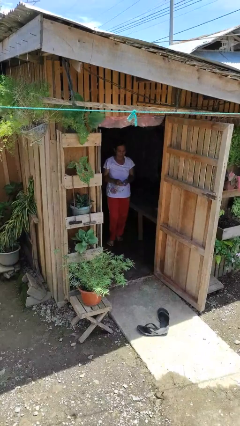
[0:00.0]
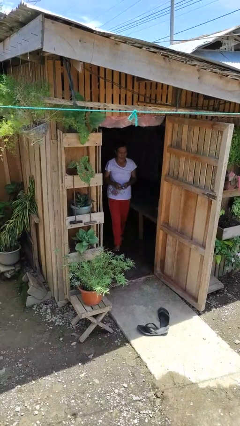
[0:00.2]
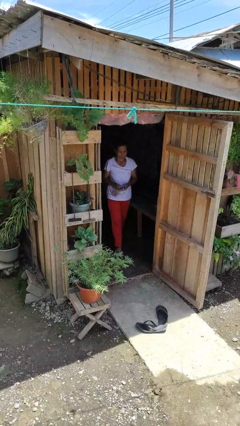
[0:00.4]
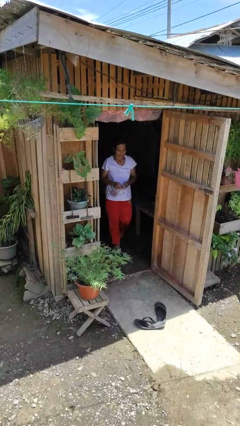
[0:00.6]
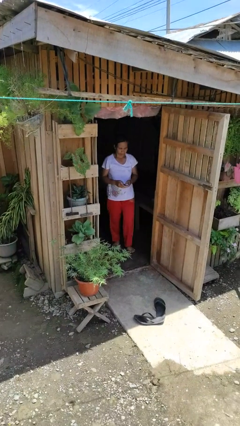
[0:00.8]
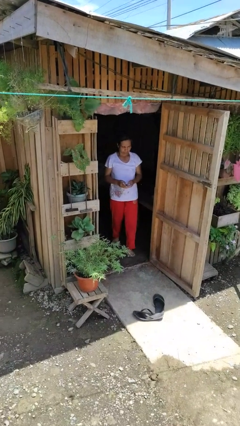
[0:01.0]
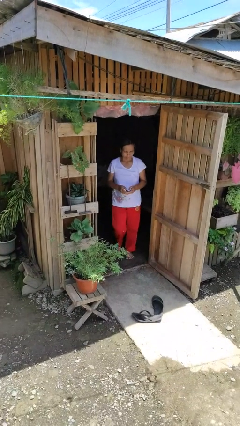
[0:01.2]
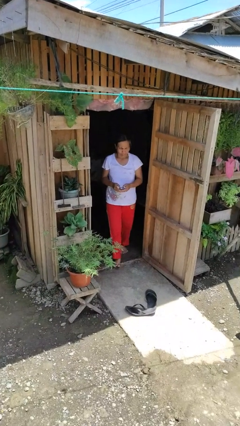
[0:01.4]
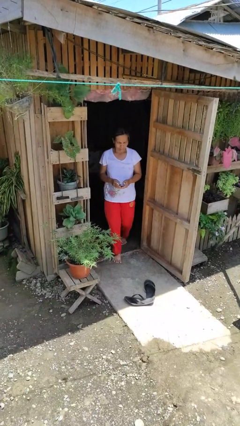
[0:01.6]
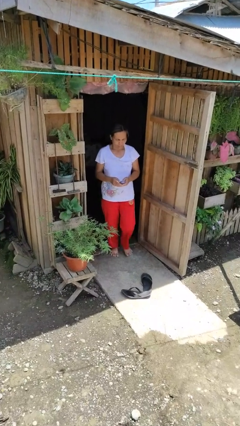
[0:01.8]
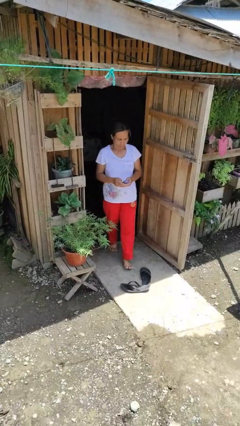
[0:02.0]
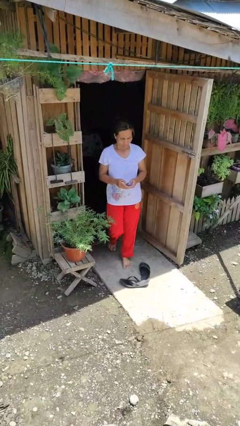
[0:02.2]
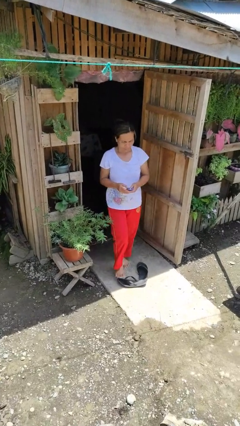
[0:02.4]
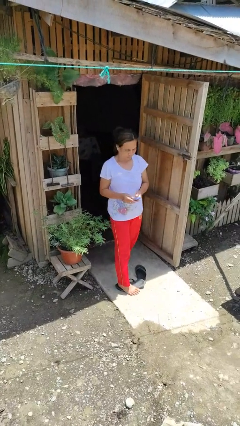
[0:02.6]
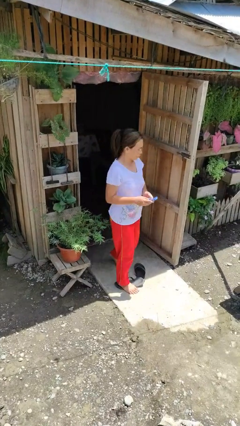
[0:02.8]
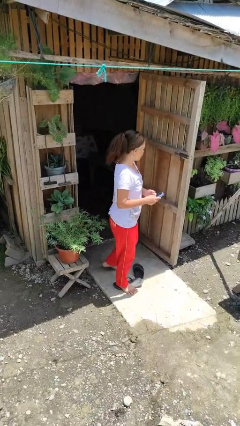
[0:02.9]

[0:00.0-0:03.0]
person enters scene through structure

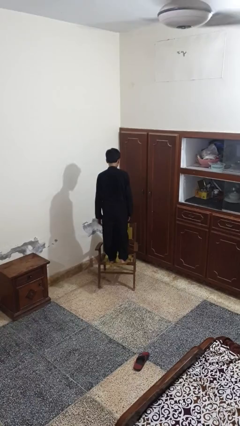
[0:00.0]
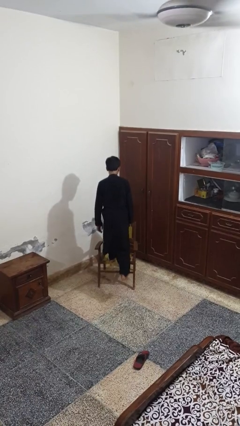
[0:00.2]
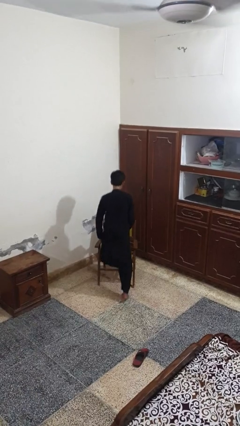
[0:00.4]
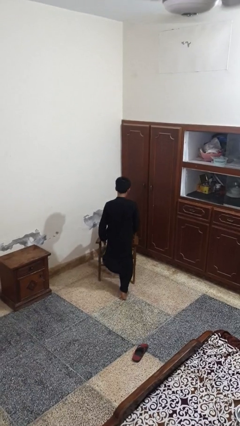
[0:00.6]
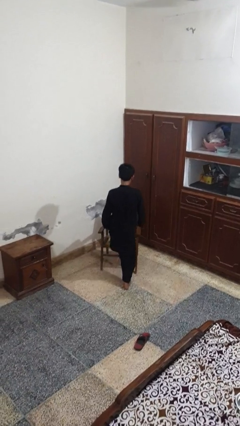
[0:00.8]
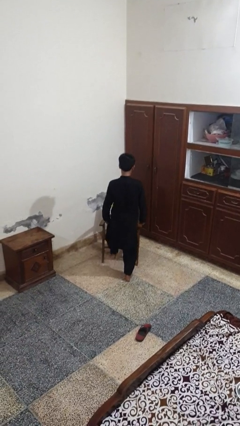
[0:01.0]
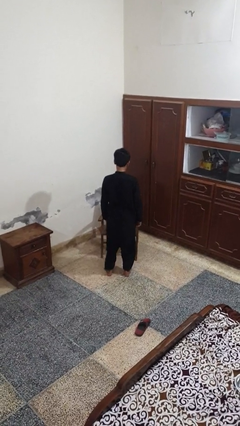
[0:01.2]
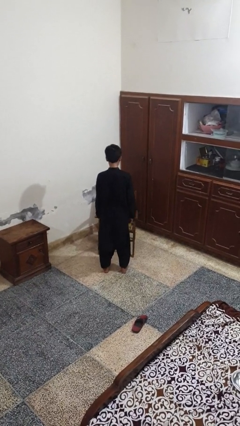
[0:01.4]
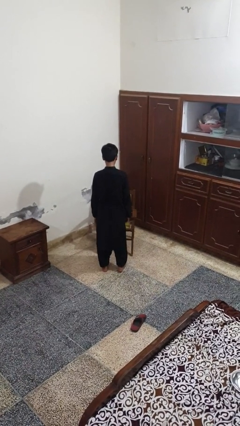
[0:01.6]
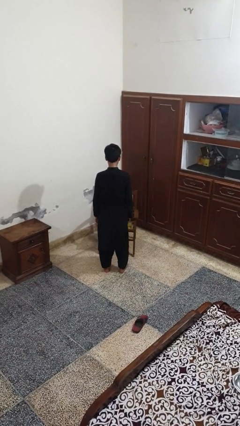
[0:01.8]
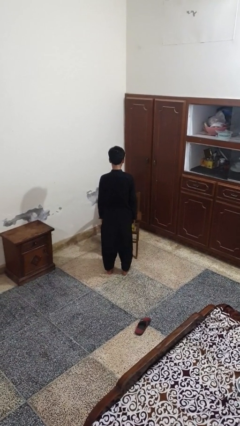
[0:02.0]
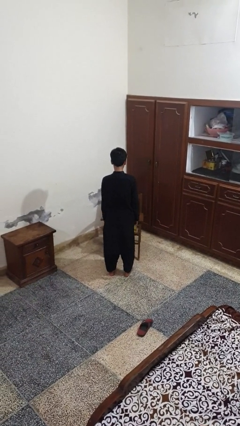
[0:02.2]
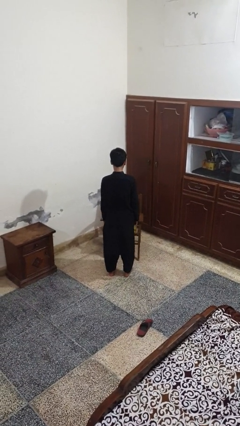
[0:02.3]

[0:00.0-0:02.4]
person climbs off chair

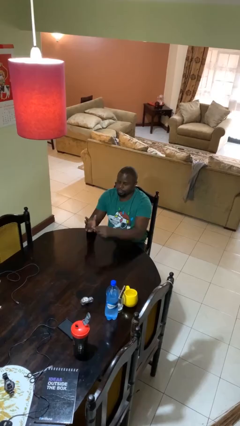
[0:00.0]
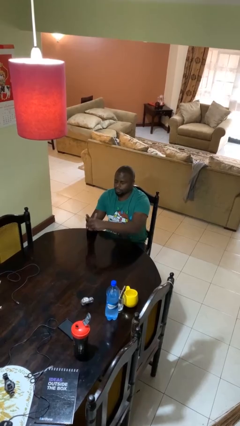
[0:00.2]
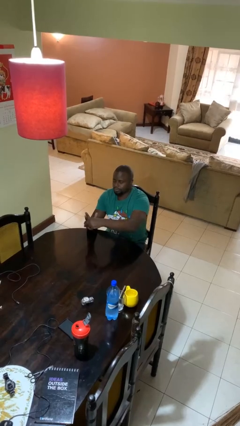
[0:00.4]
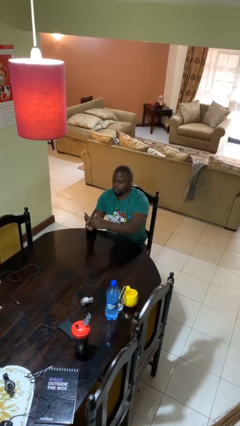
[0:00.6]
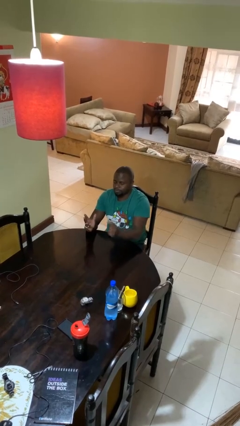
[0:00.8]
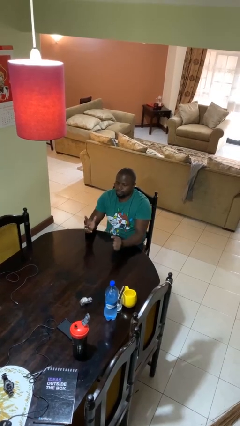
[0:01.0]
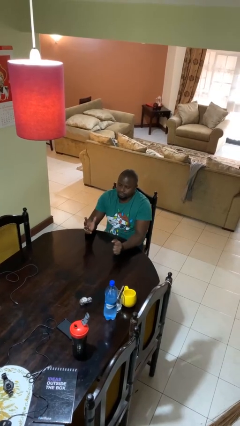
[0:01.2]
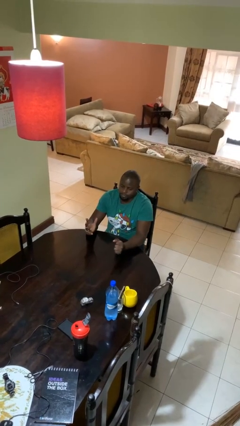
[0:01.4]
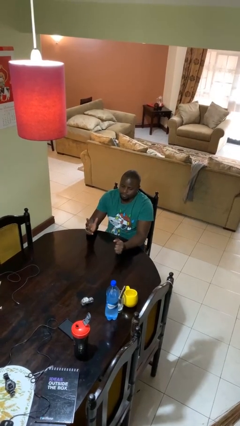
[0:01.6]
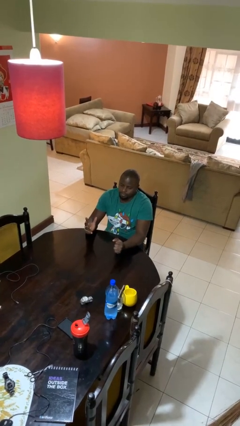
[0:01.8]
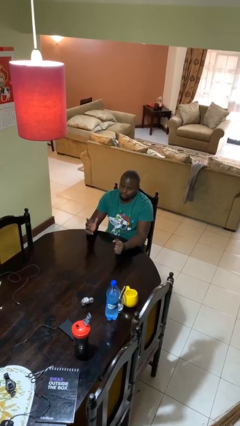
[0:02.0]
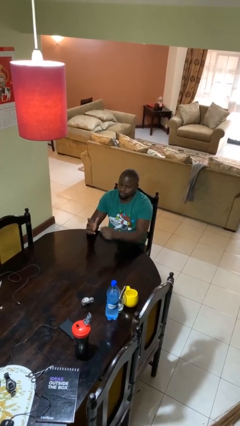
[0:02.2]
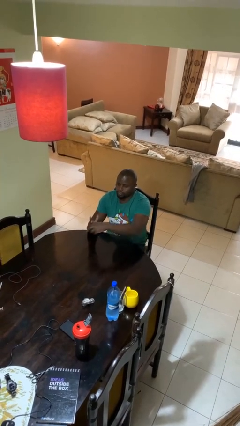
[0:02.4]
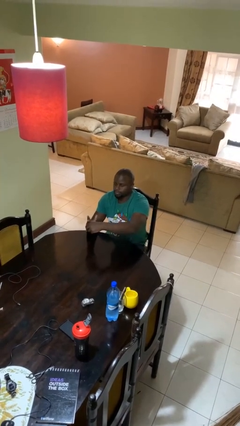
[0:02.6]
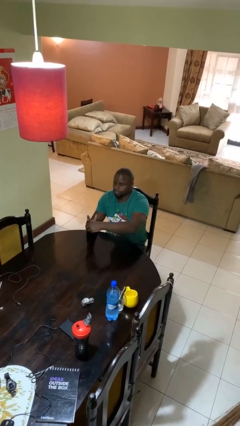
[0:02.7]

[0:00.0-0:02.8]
person puts on ring

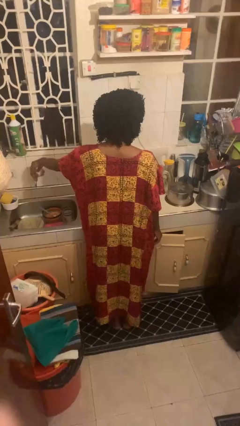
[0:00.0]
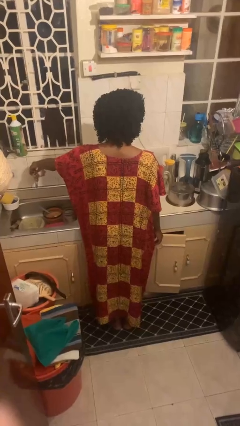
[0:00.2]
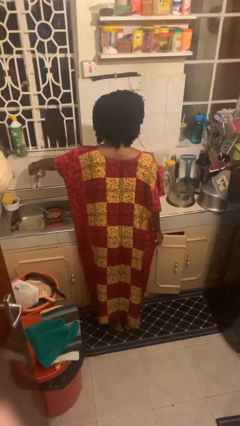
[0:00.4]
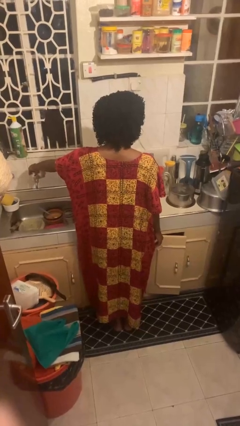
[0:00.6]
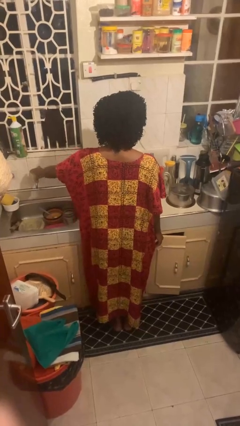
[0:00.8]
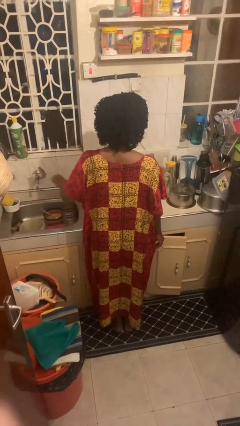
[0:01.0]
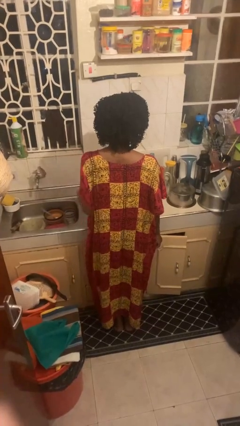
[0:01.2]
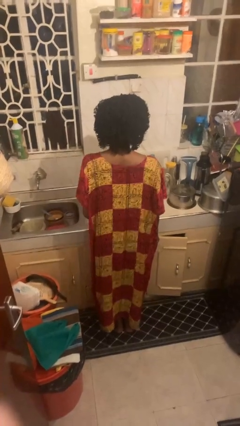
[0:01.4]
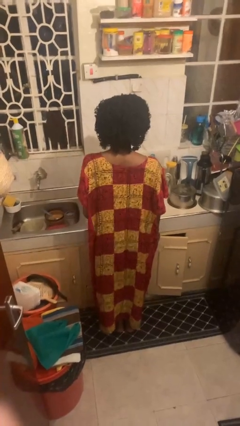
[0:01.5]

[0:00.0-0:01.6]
person turns off faucet

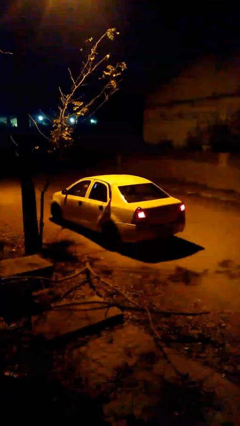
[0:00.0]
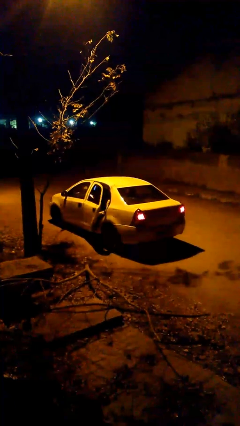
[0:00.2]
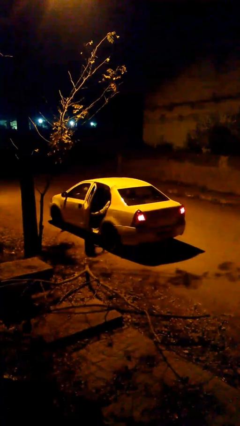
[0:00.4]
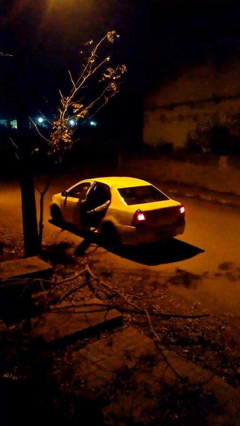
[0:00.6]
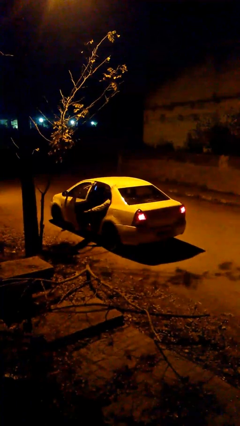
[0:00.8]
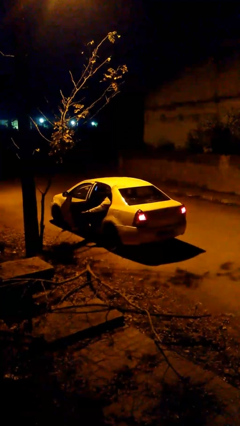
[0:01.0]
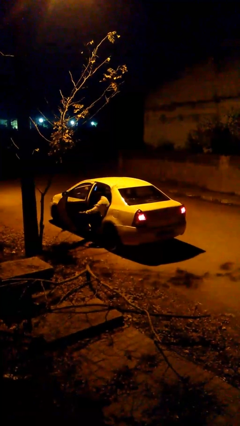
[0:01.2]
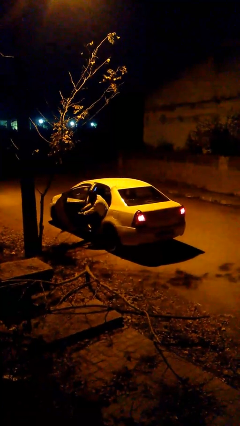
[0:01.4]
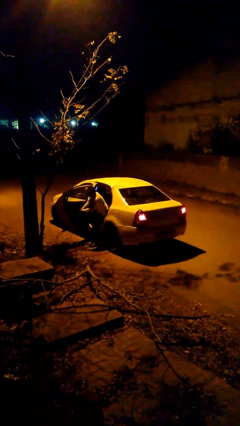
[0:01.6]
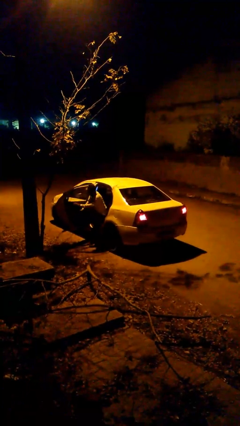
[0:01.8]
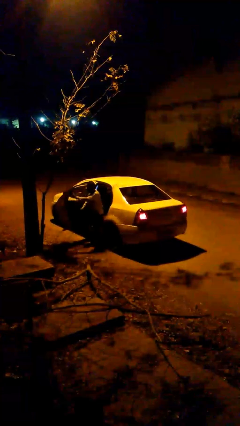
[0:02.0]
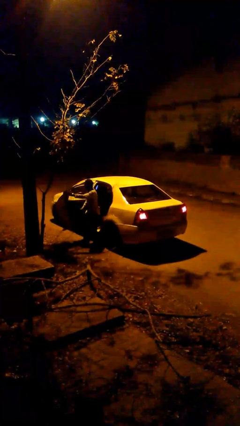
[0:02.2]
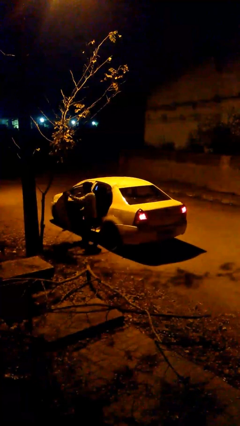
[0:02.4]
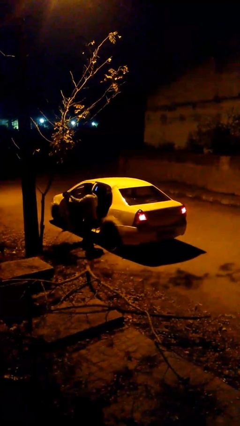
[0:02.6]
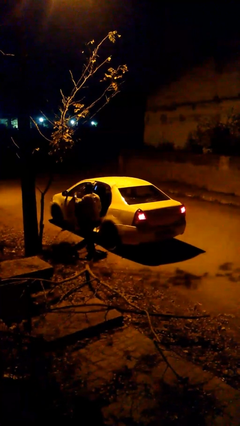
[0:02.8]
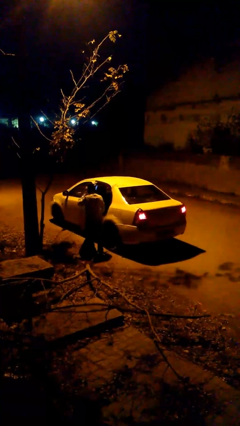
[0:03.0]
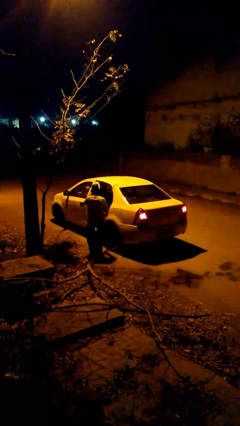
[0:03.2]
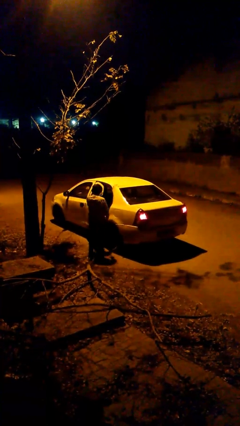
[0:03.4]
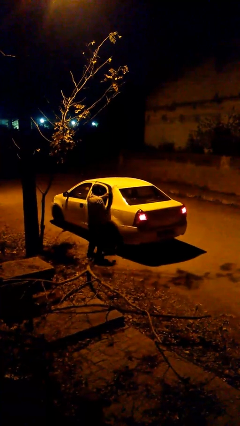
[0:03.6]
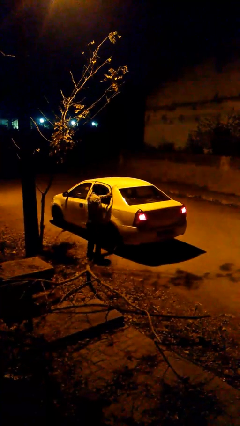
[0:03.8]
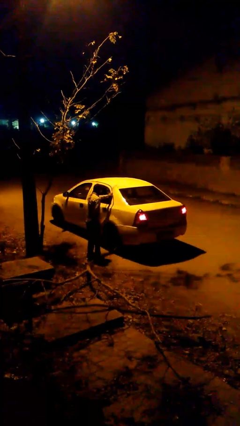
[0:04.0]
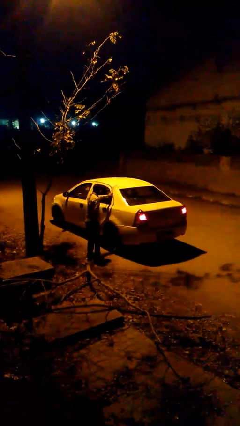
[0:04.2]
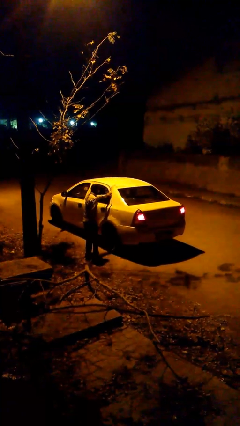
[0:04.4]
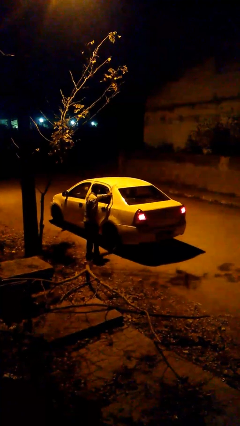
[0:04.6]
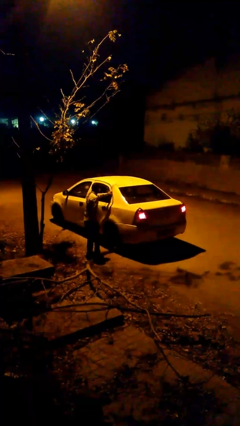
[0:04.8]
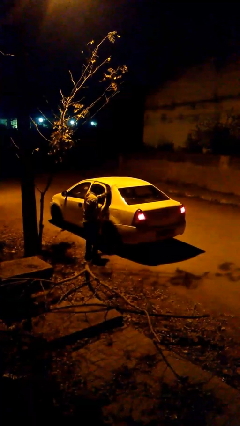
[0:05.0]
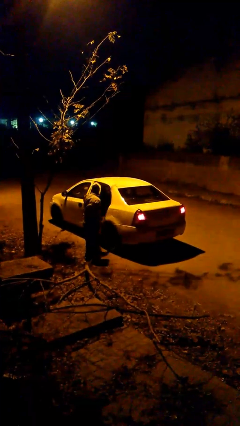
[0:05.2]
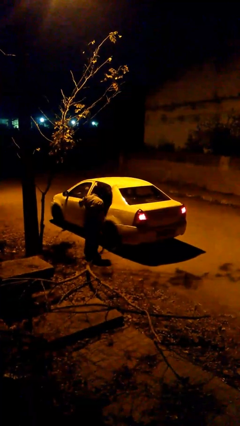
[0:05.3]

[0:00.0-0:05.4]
car drops off person

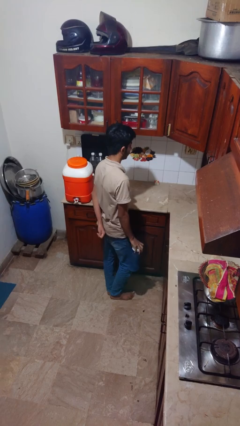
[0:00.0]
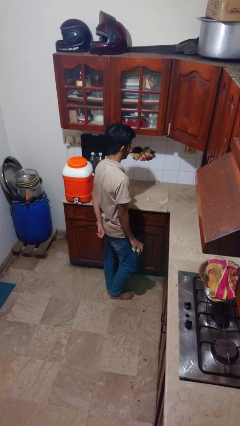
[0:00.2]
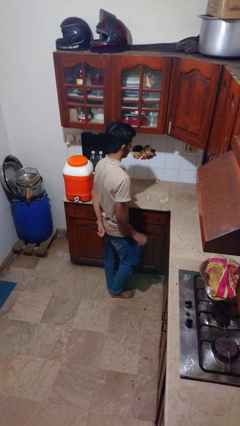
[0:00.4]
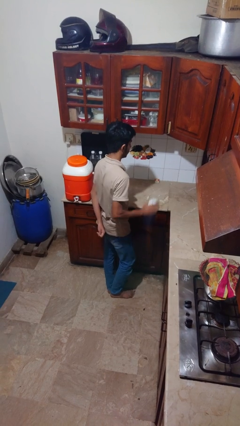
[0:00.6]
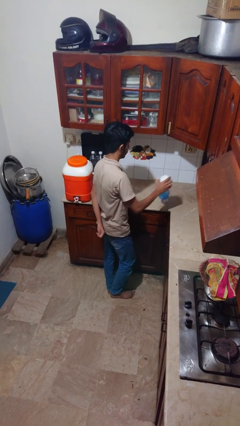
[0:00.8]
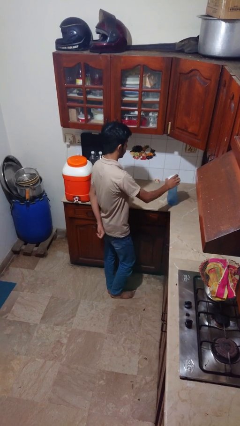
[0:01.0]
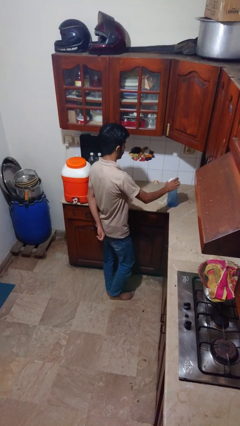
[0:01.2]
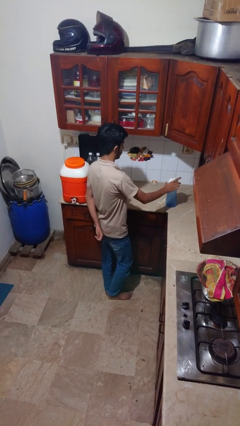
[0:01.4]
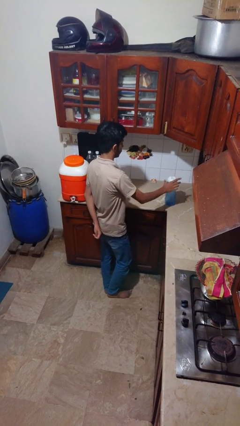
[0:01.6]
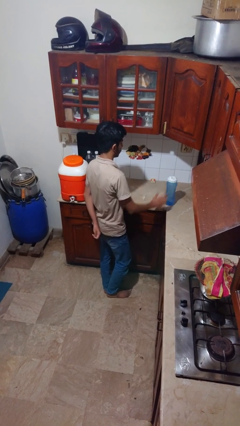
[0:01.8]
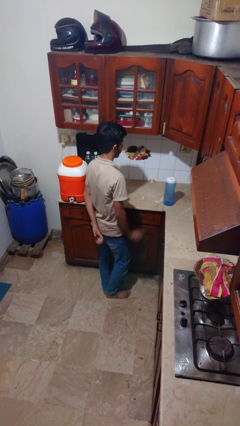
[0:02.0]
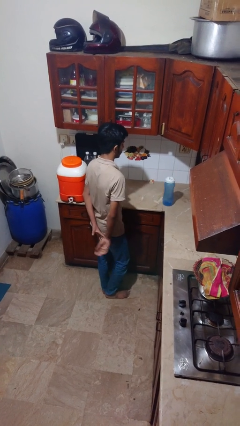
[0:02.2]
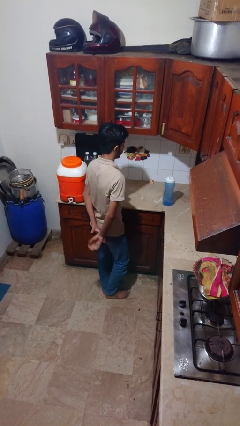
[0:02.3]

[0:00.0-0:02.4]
person puts down object on countertop

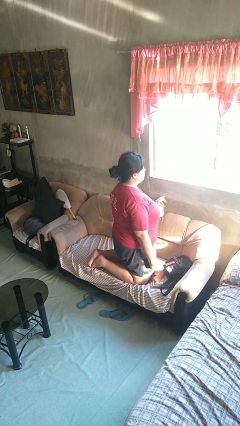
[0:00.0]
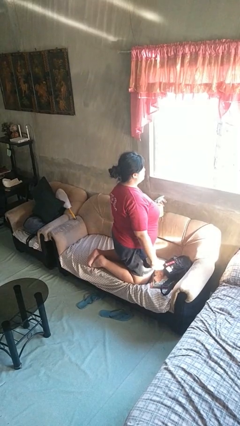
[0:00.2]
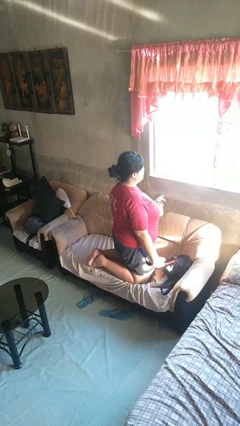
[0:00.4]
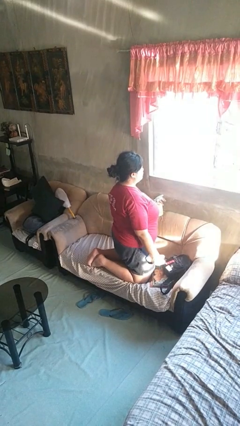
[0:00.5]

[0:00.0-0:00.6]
person sprays from bottle
